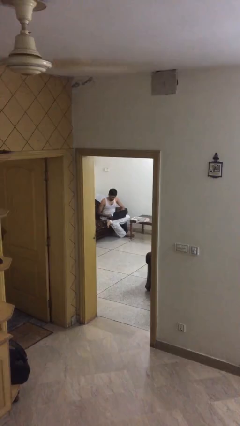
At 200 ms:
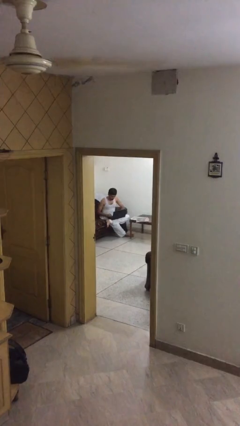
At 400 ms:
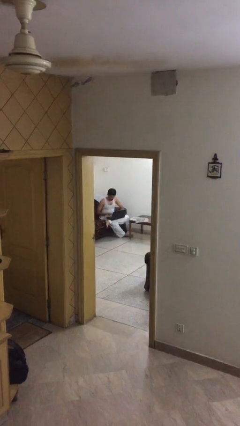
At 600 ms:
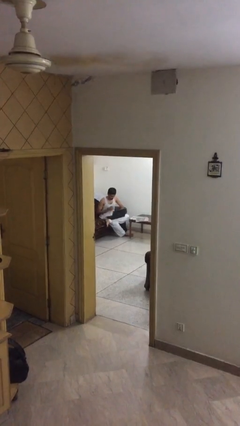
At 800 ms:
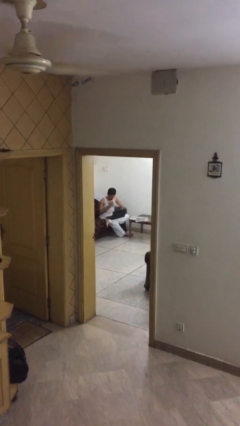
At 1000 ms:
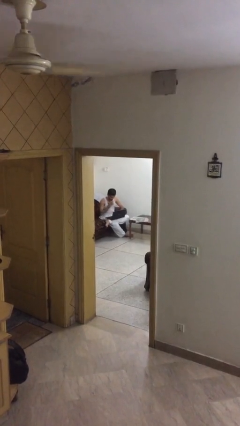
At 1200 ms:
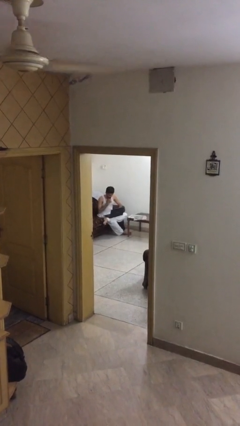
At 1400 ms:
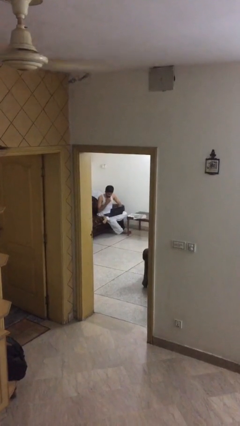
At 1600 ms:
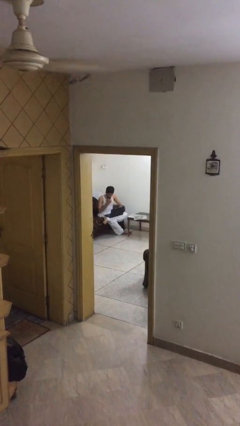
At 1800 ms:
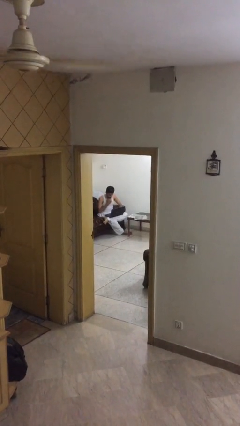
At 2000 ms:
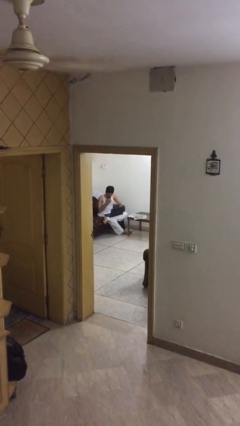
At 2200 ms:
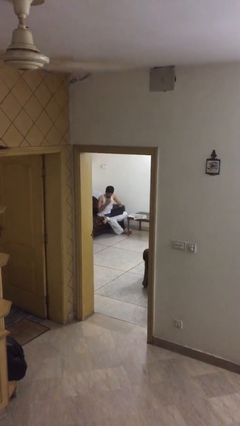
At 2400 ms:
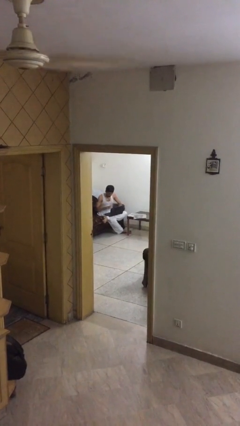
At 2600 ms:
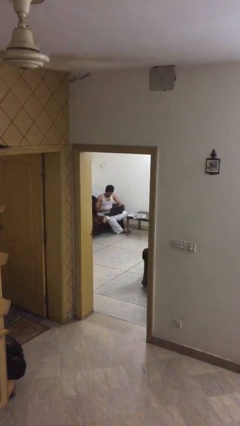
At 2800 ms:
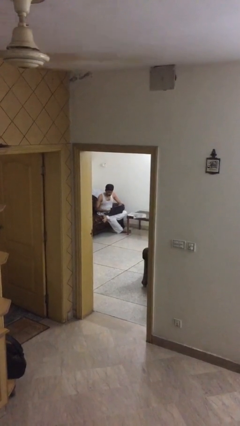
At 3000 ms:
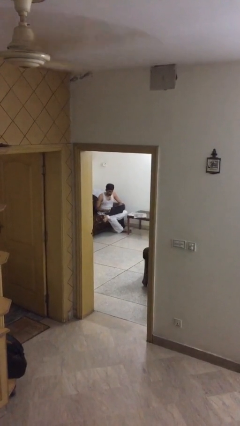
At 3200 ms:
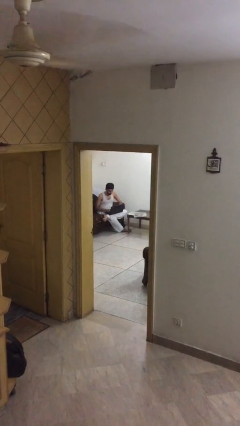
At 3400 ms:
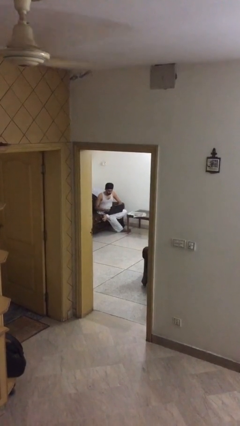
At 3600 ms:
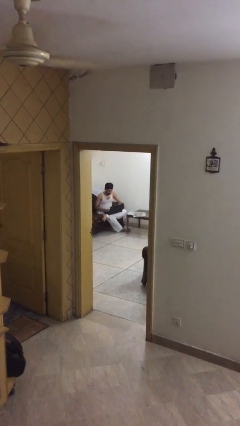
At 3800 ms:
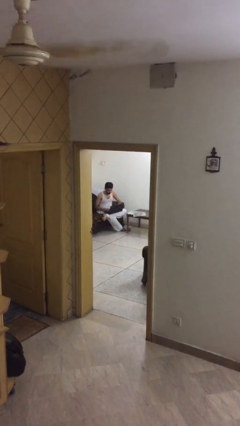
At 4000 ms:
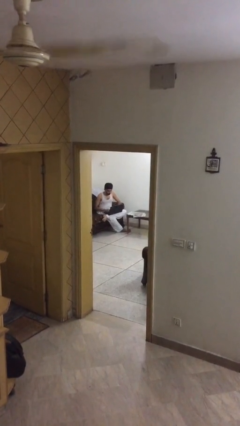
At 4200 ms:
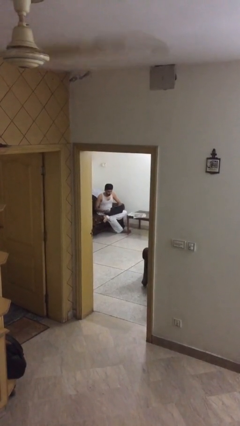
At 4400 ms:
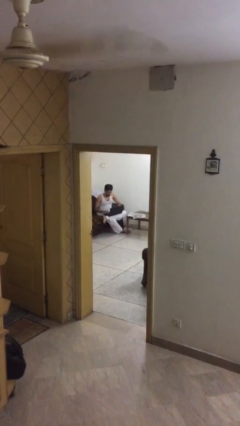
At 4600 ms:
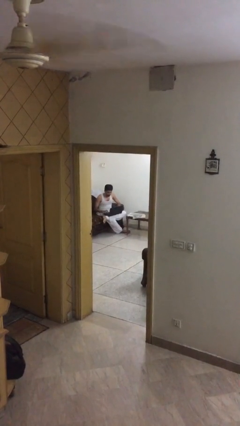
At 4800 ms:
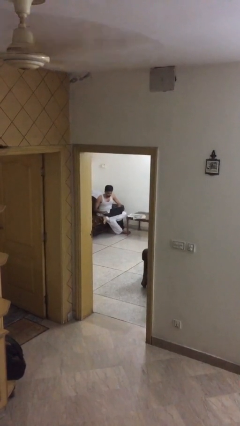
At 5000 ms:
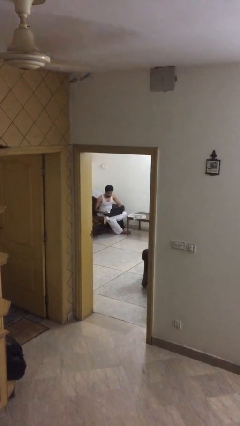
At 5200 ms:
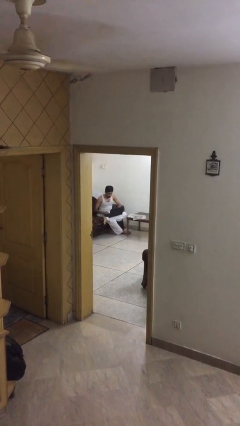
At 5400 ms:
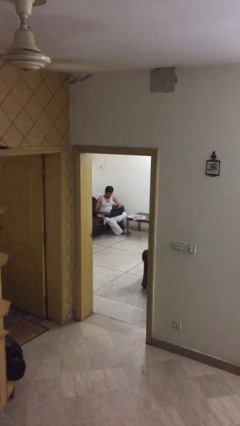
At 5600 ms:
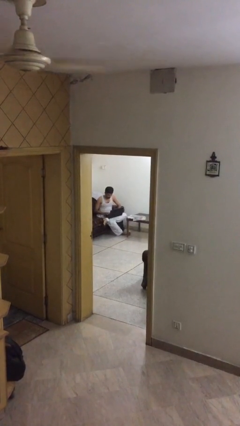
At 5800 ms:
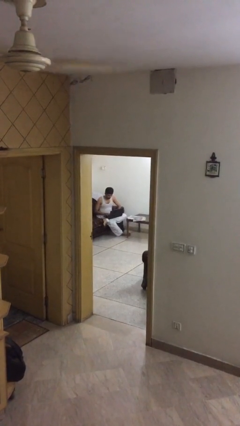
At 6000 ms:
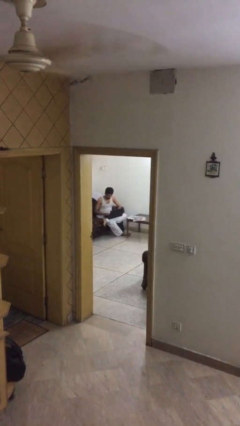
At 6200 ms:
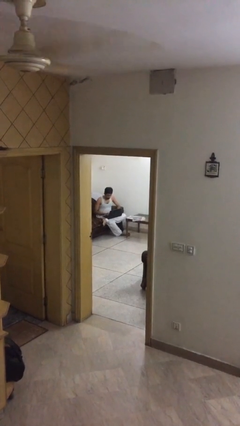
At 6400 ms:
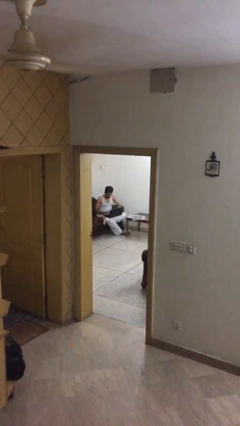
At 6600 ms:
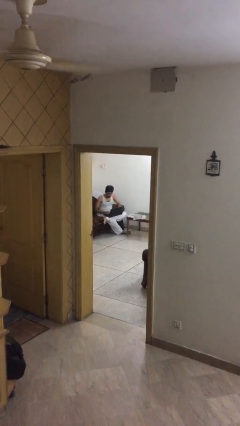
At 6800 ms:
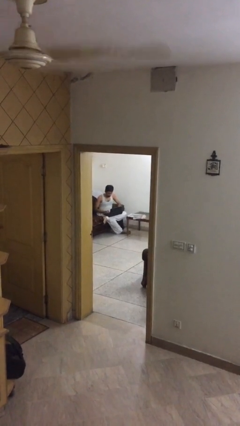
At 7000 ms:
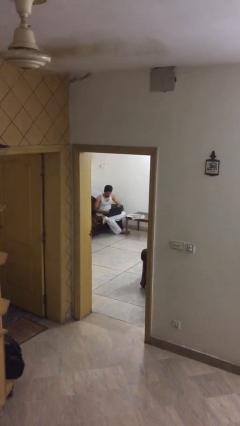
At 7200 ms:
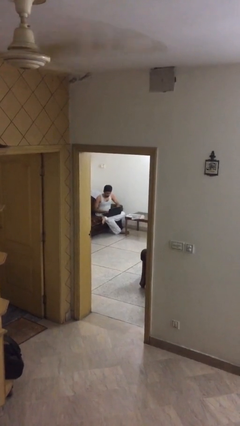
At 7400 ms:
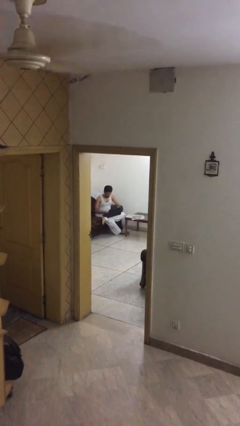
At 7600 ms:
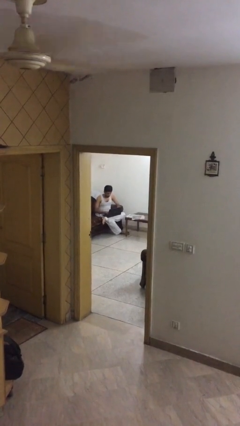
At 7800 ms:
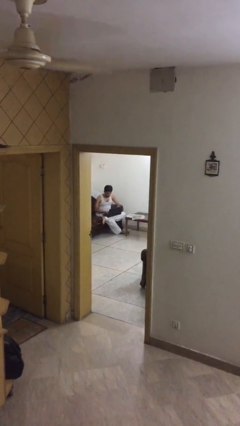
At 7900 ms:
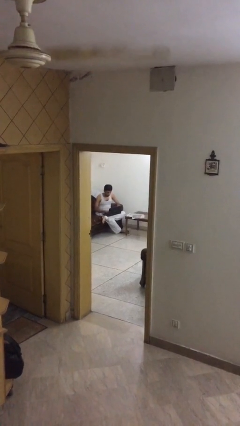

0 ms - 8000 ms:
person interacts with laptop

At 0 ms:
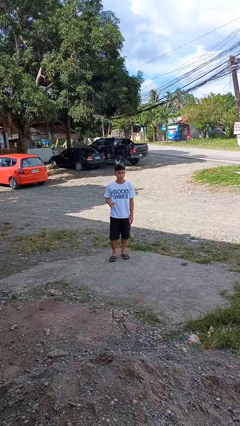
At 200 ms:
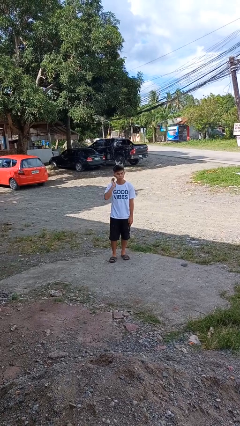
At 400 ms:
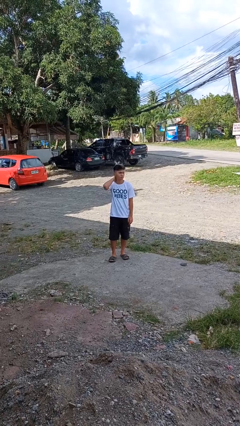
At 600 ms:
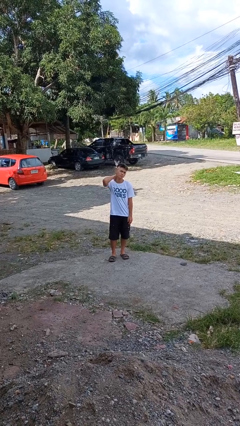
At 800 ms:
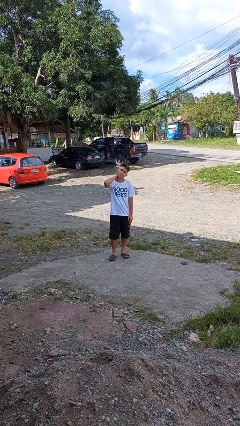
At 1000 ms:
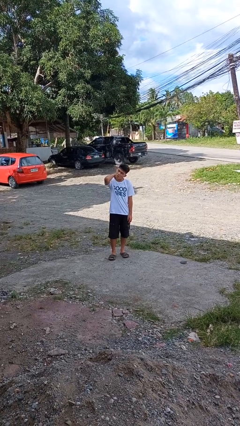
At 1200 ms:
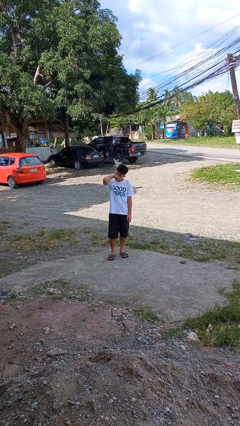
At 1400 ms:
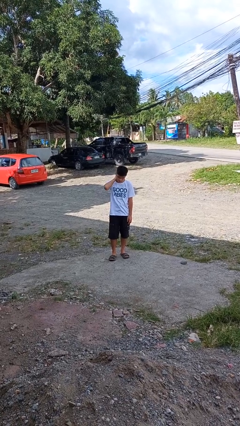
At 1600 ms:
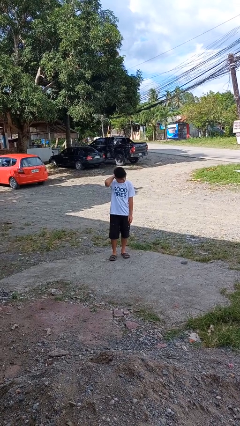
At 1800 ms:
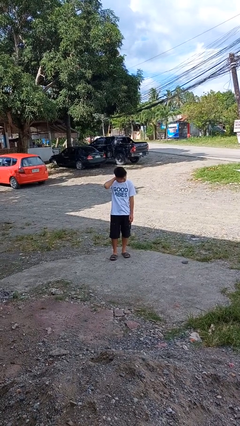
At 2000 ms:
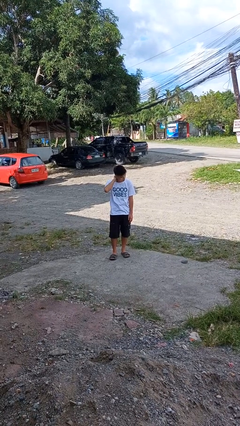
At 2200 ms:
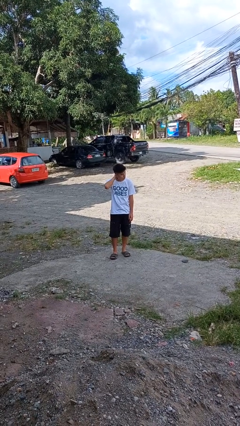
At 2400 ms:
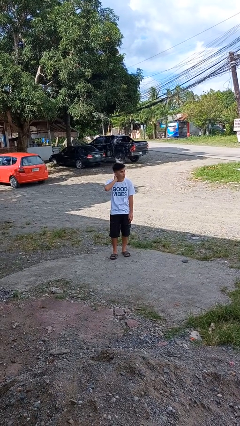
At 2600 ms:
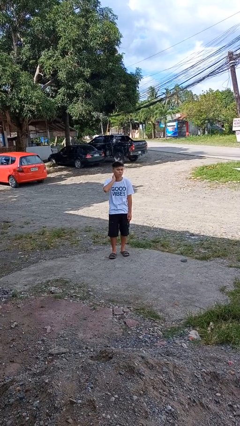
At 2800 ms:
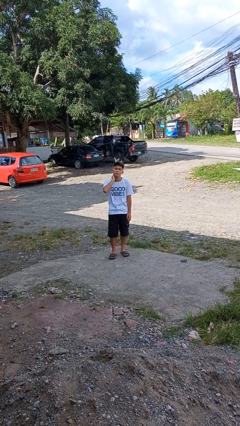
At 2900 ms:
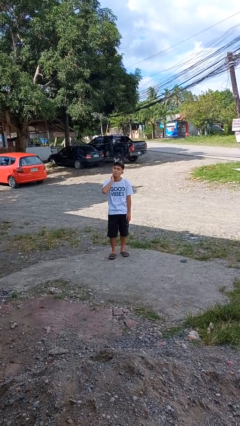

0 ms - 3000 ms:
person rubs neck

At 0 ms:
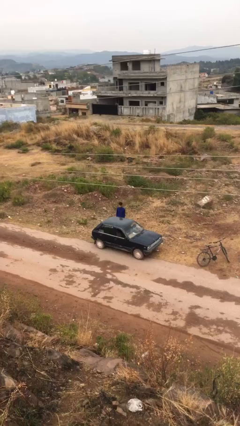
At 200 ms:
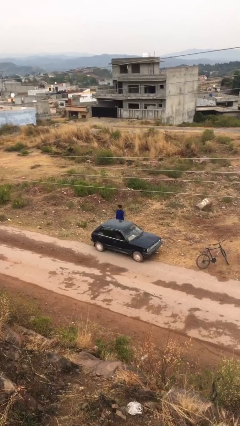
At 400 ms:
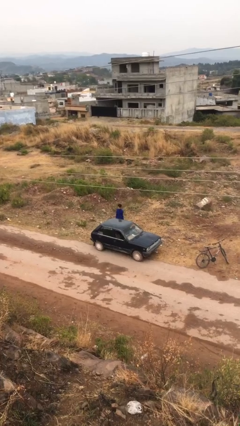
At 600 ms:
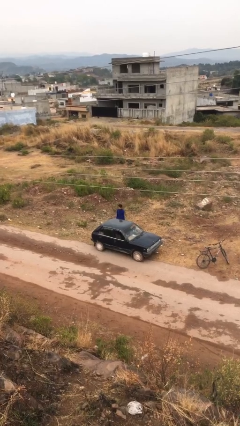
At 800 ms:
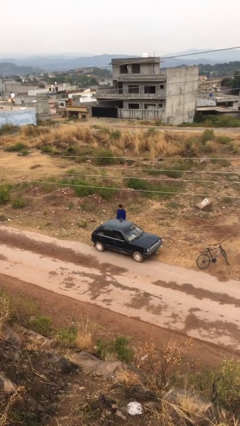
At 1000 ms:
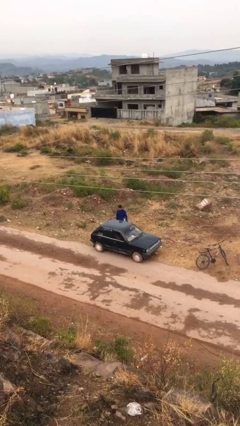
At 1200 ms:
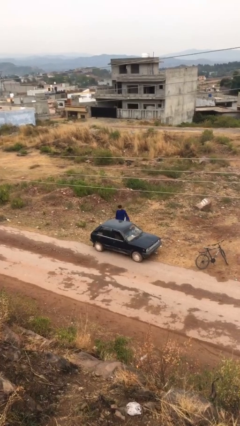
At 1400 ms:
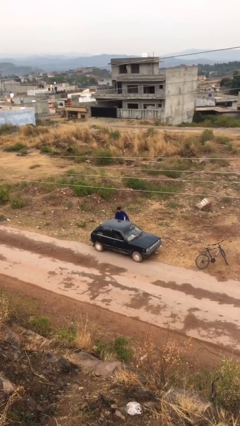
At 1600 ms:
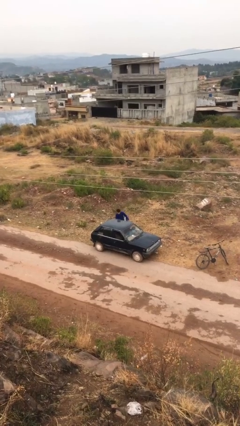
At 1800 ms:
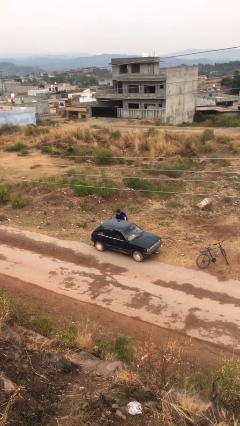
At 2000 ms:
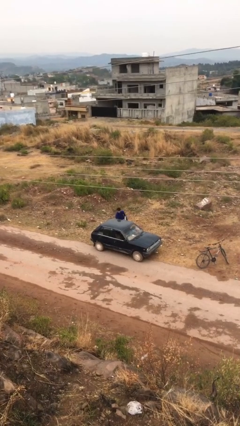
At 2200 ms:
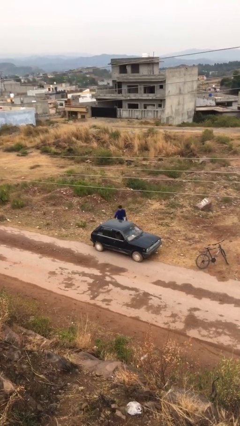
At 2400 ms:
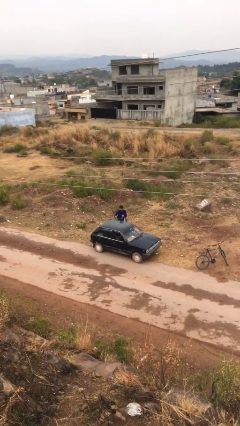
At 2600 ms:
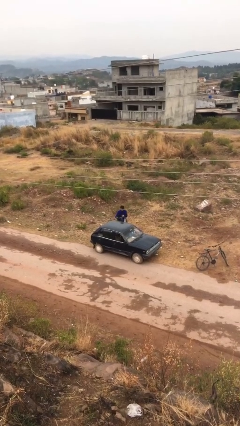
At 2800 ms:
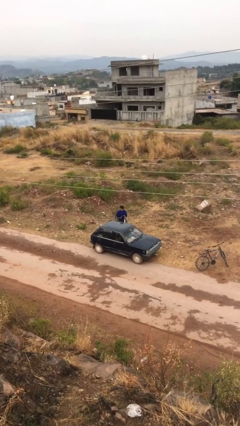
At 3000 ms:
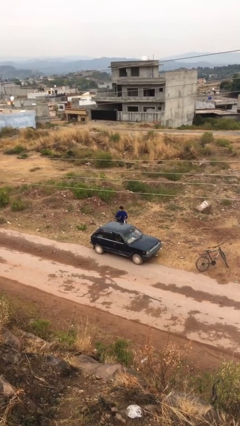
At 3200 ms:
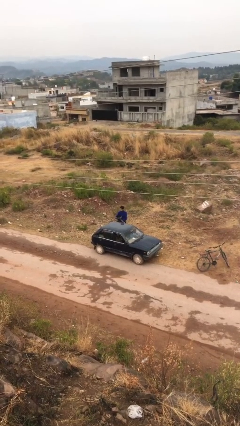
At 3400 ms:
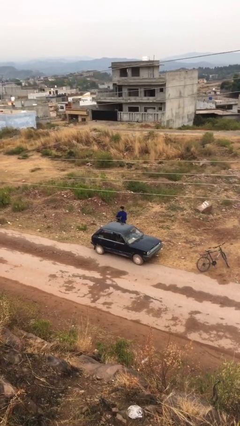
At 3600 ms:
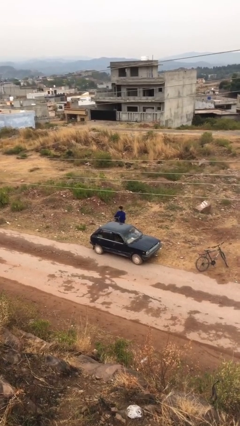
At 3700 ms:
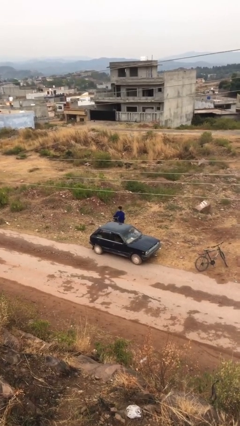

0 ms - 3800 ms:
person unloads car

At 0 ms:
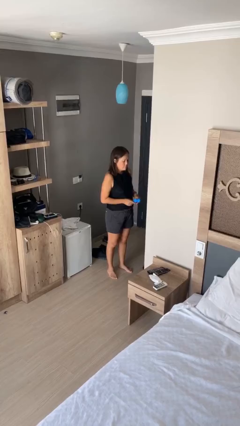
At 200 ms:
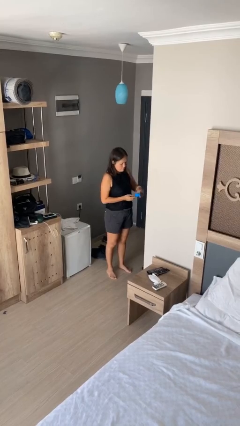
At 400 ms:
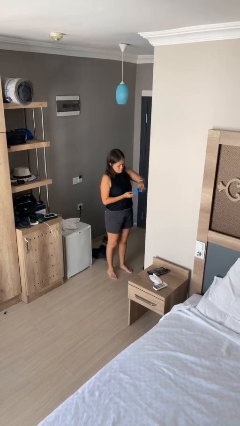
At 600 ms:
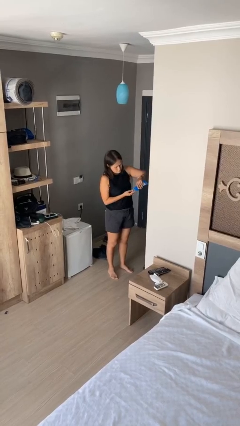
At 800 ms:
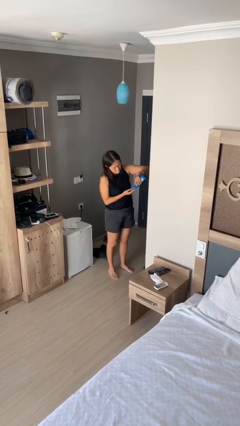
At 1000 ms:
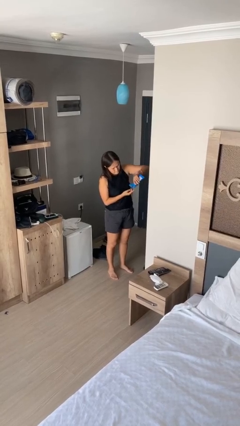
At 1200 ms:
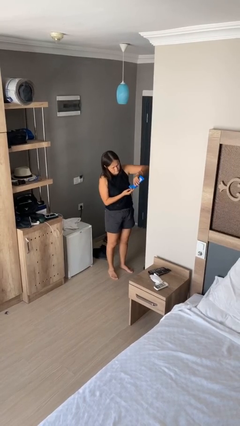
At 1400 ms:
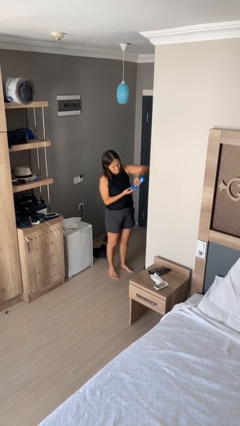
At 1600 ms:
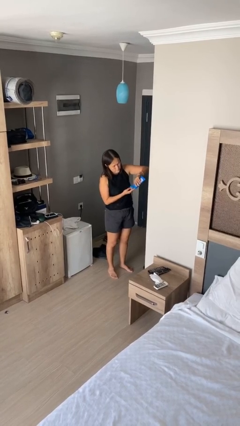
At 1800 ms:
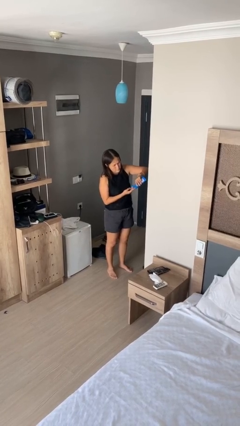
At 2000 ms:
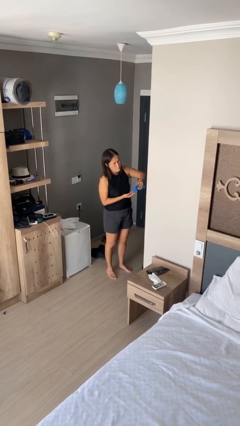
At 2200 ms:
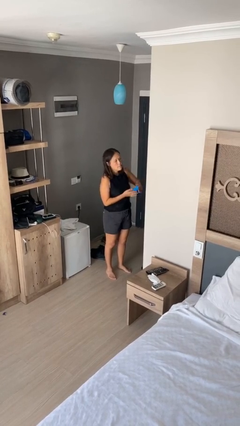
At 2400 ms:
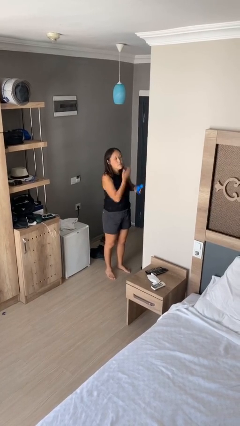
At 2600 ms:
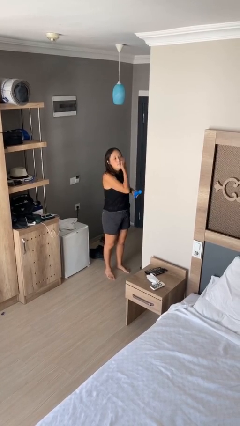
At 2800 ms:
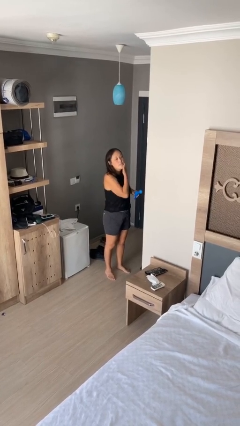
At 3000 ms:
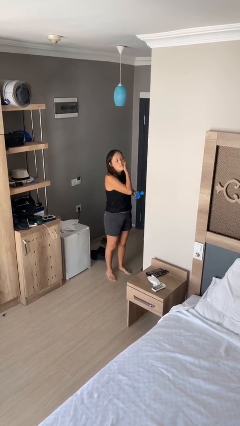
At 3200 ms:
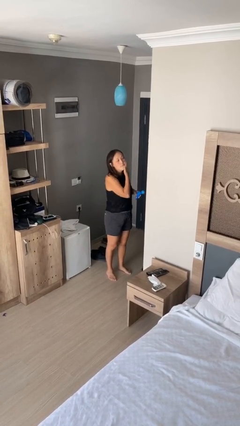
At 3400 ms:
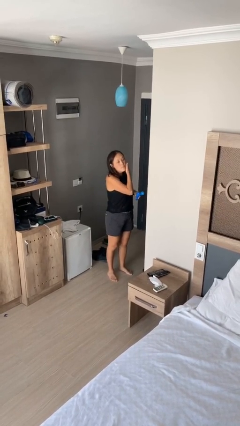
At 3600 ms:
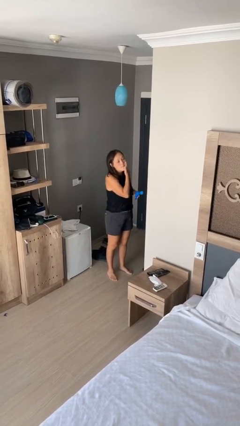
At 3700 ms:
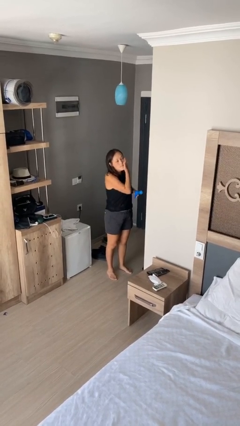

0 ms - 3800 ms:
person applies facial moisturizer
